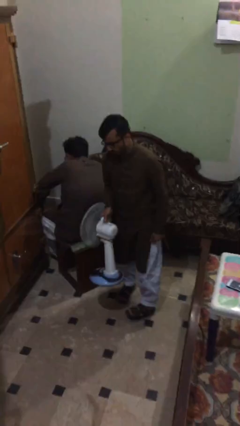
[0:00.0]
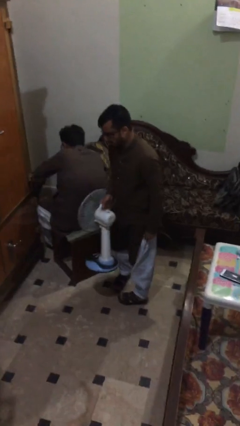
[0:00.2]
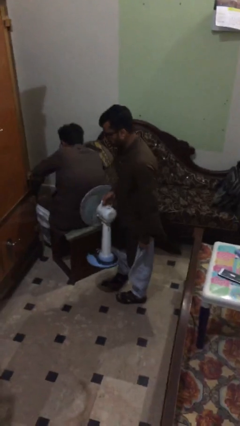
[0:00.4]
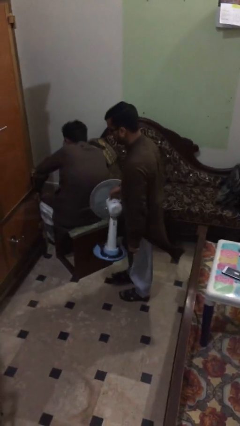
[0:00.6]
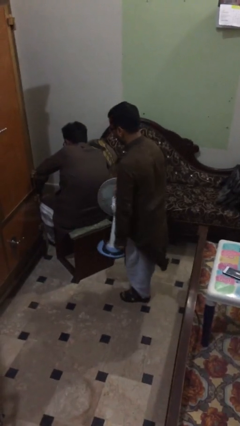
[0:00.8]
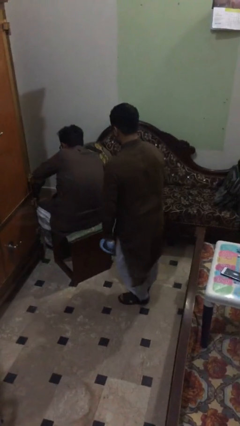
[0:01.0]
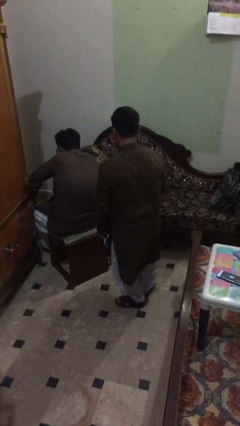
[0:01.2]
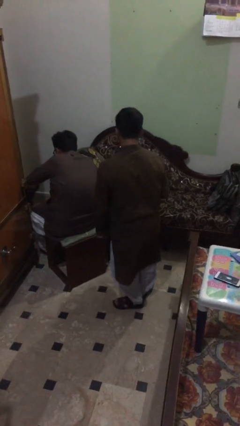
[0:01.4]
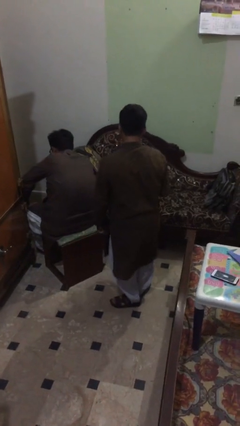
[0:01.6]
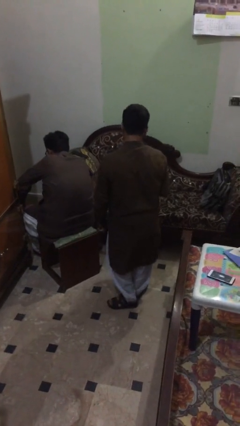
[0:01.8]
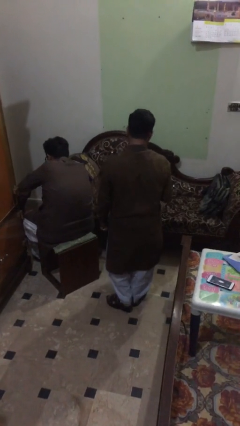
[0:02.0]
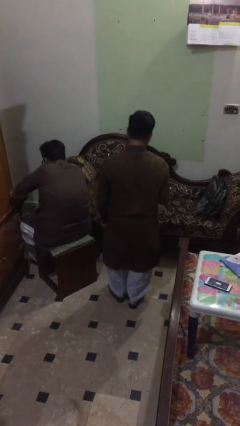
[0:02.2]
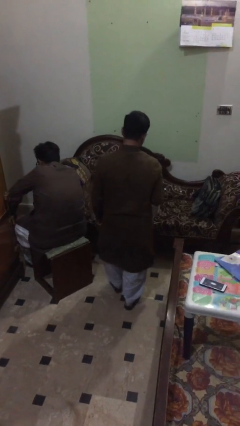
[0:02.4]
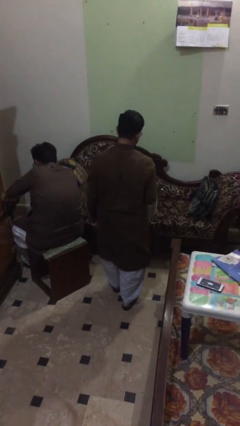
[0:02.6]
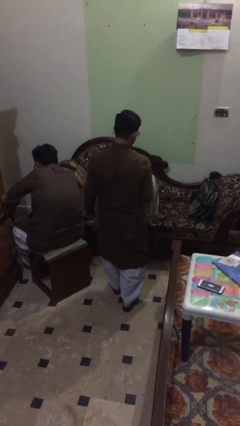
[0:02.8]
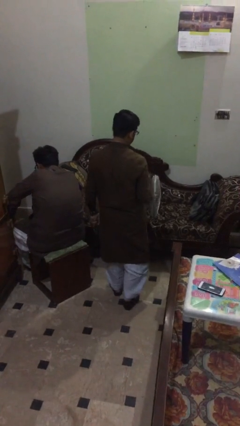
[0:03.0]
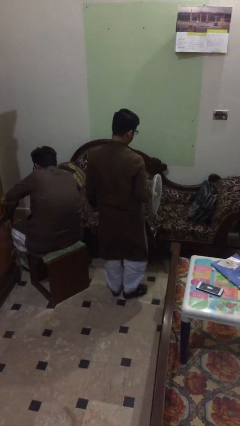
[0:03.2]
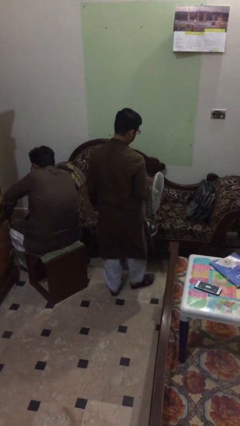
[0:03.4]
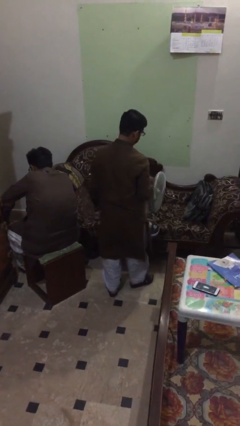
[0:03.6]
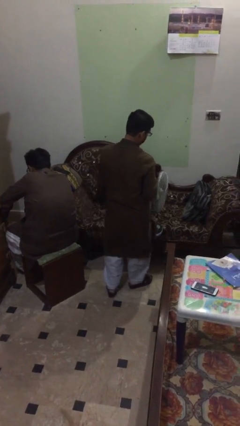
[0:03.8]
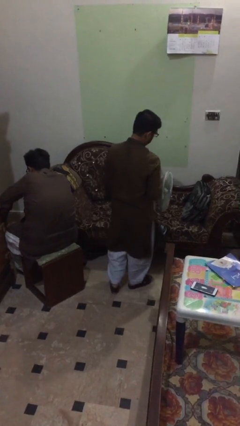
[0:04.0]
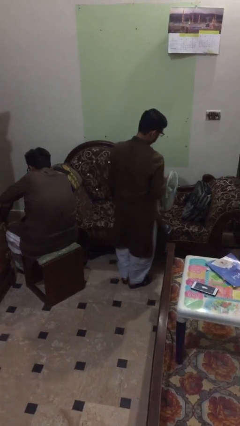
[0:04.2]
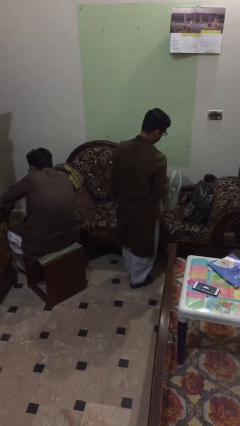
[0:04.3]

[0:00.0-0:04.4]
person steals object from person

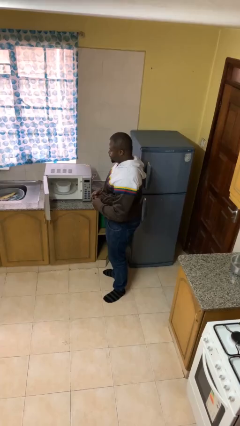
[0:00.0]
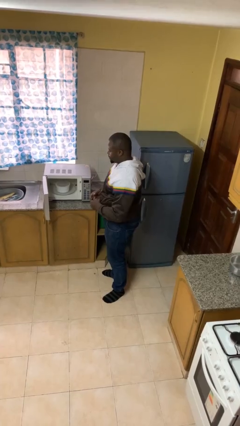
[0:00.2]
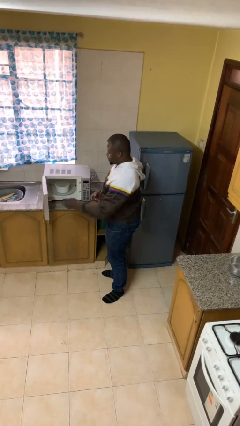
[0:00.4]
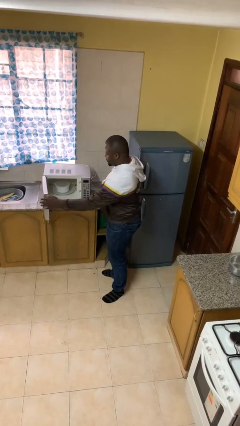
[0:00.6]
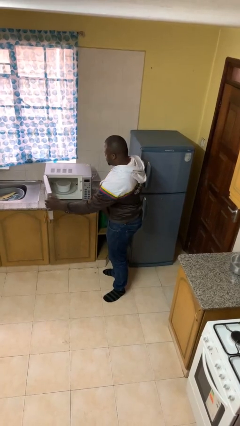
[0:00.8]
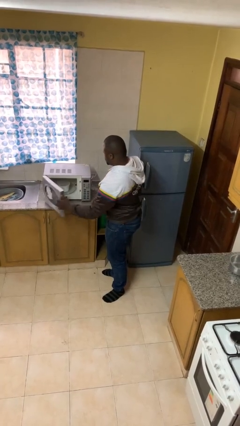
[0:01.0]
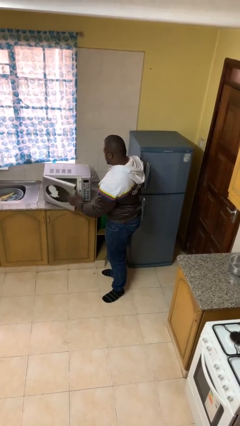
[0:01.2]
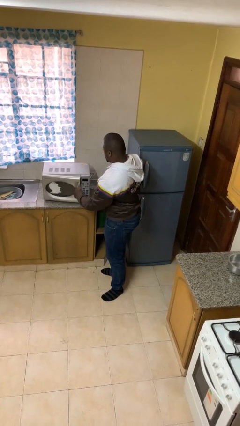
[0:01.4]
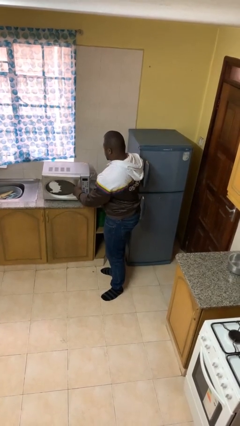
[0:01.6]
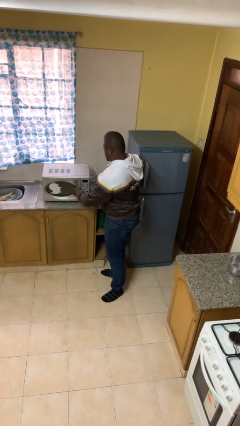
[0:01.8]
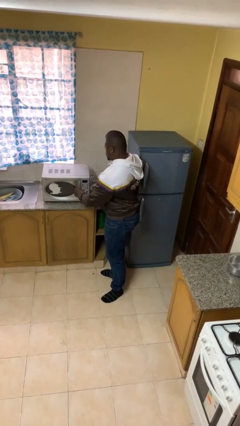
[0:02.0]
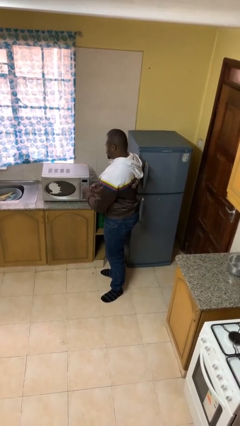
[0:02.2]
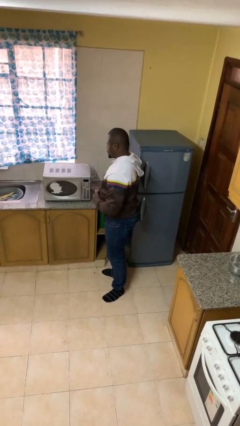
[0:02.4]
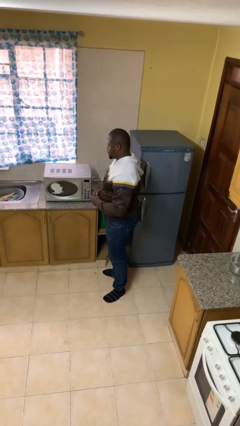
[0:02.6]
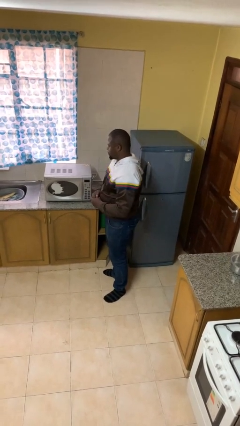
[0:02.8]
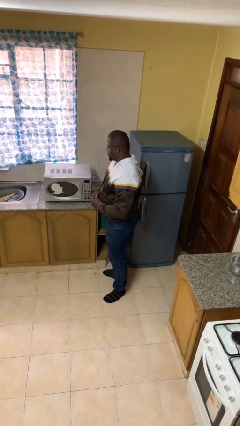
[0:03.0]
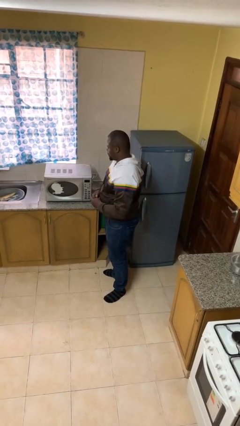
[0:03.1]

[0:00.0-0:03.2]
person closes microwave

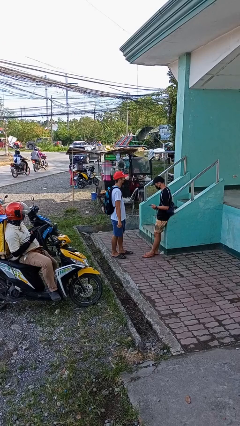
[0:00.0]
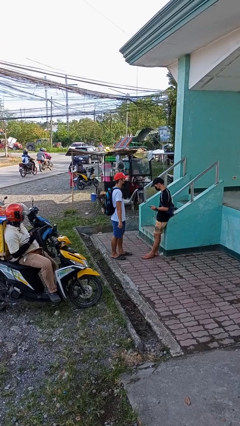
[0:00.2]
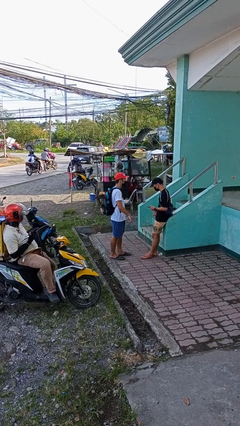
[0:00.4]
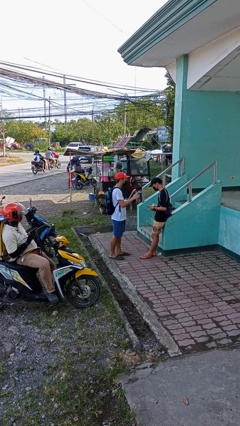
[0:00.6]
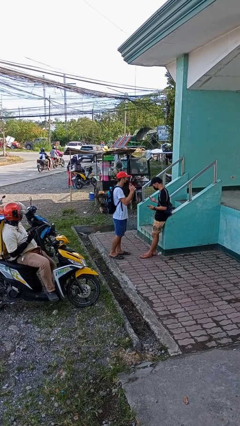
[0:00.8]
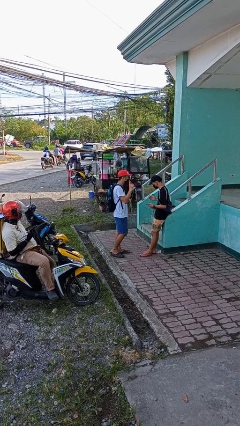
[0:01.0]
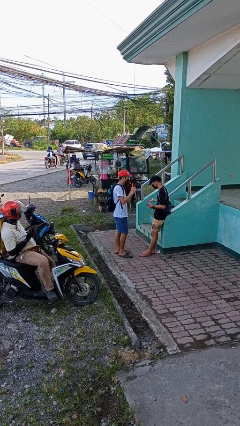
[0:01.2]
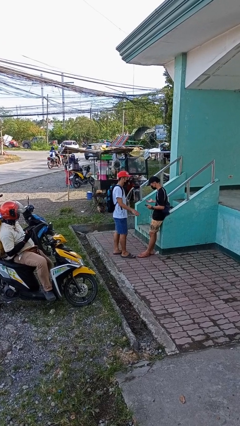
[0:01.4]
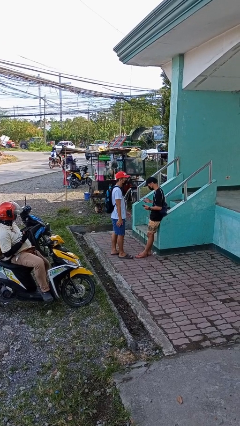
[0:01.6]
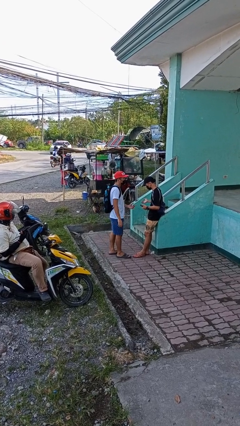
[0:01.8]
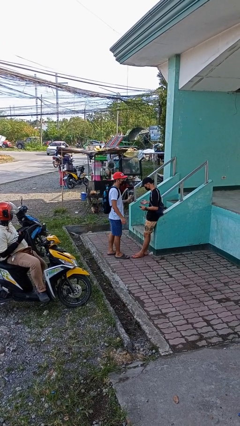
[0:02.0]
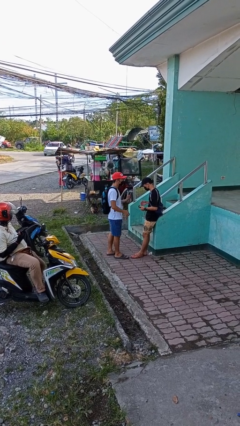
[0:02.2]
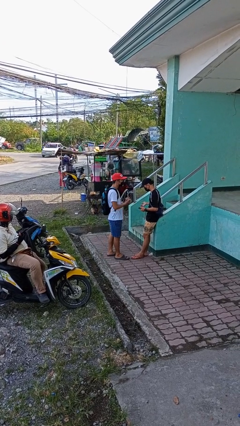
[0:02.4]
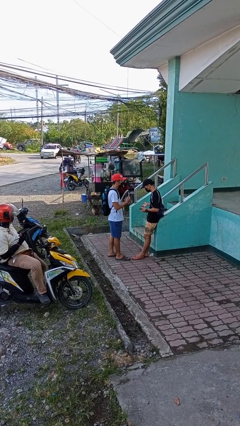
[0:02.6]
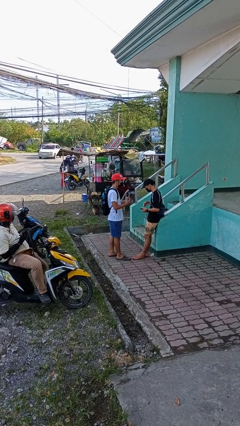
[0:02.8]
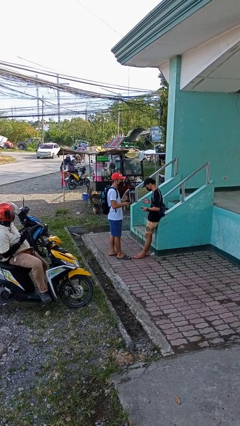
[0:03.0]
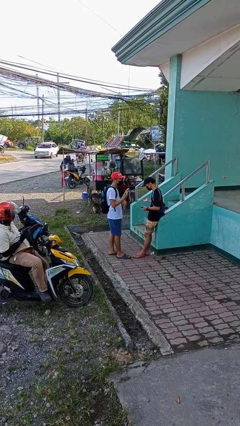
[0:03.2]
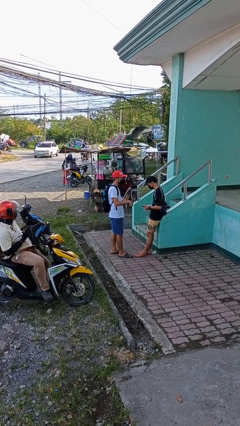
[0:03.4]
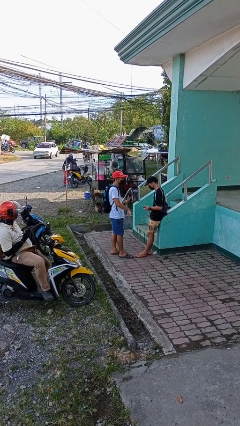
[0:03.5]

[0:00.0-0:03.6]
person talks to person

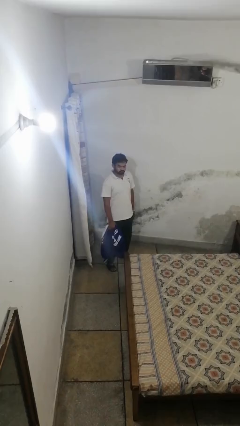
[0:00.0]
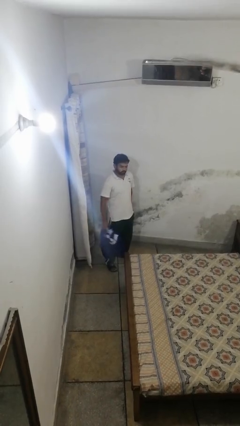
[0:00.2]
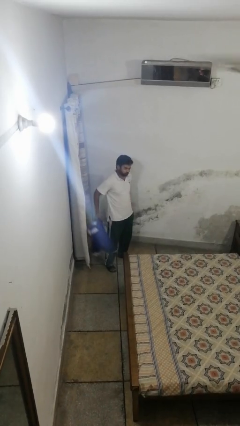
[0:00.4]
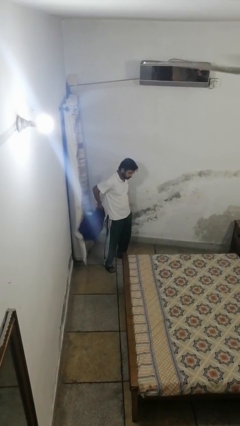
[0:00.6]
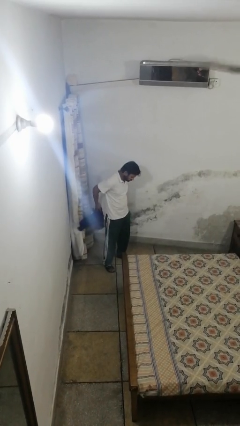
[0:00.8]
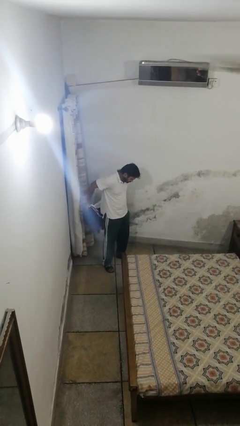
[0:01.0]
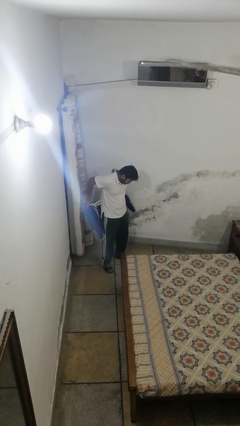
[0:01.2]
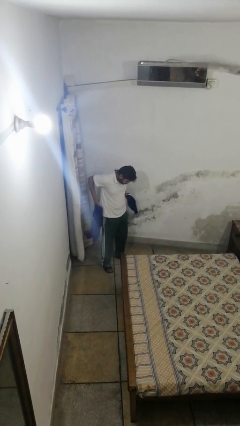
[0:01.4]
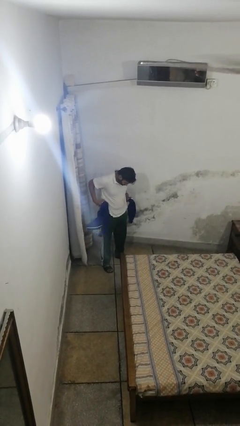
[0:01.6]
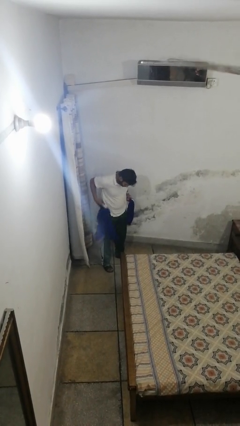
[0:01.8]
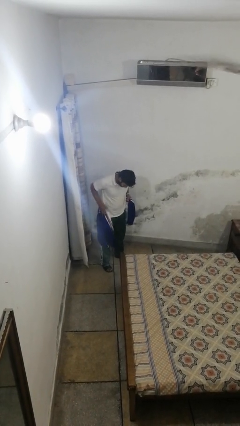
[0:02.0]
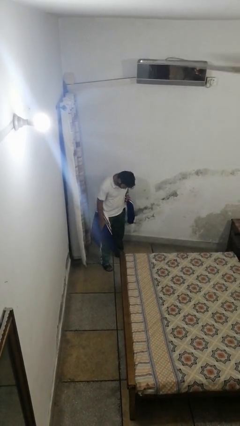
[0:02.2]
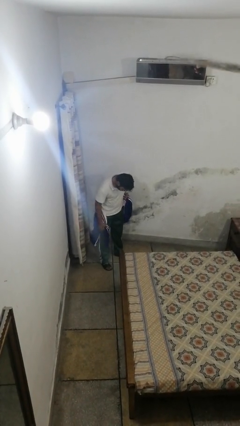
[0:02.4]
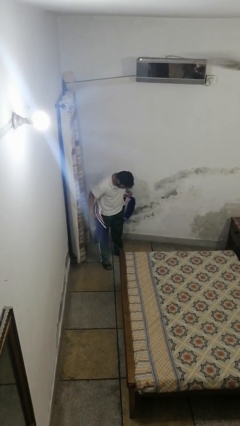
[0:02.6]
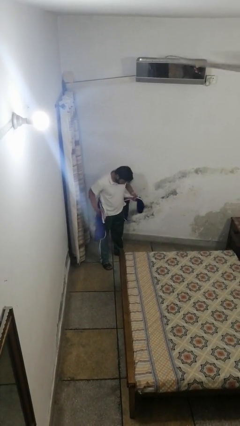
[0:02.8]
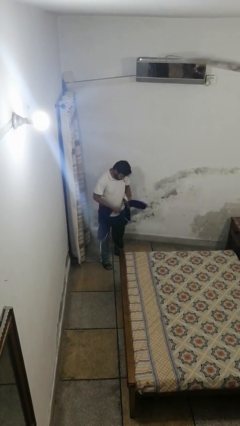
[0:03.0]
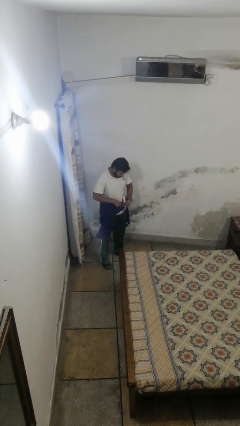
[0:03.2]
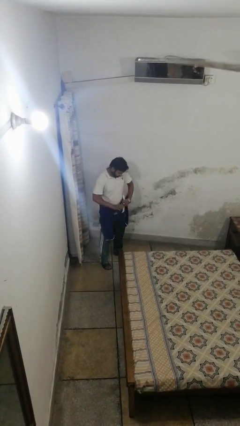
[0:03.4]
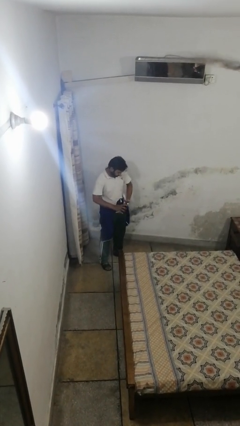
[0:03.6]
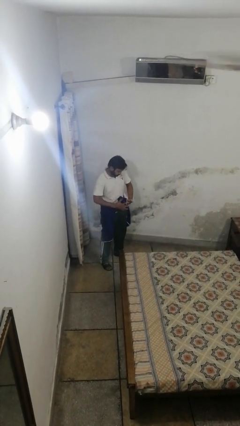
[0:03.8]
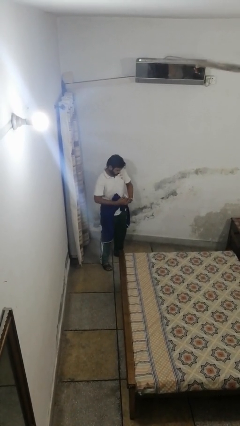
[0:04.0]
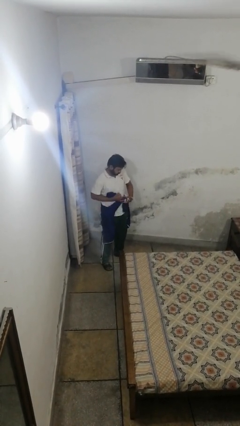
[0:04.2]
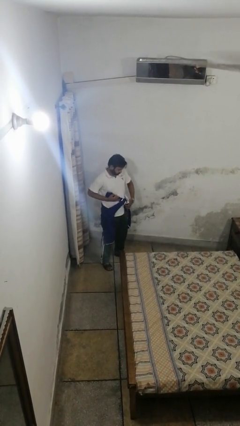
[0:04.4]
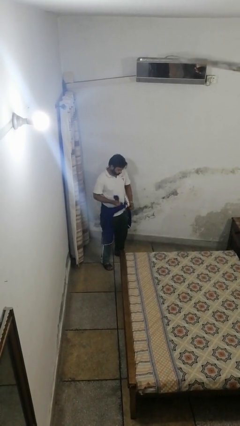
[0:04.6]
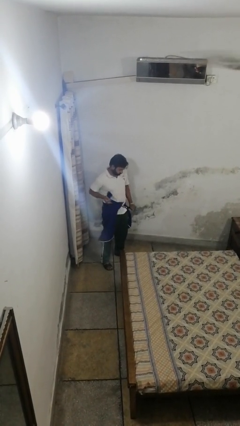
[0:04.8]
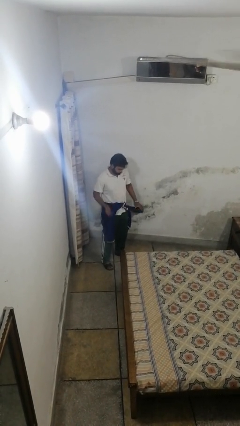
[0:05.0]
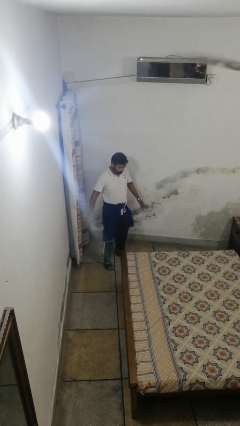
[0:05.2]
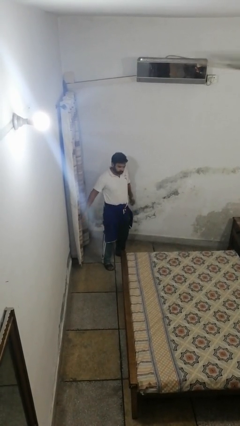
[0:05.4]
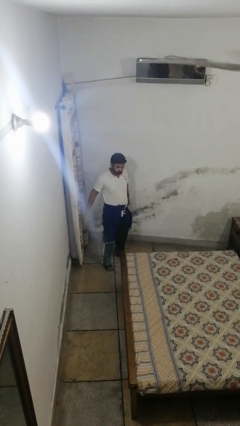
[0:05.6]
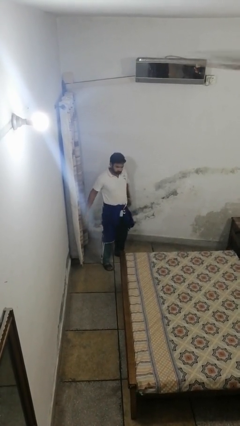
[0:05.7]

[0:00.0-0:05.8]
person ties jacket around waist

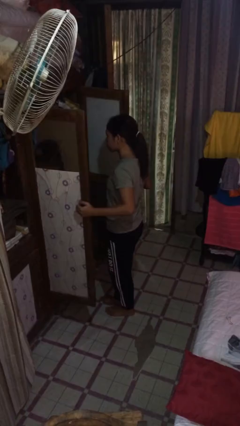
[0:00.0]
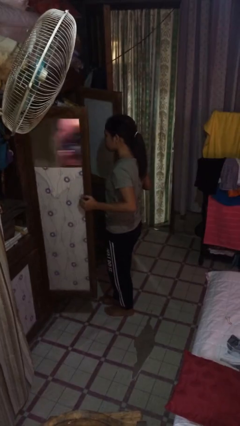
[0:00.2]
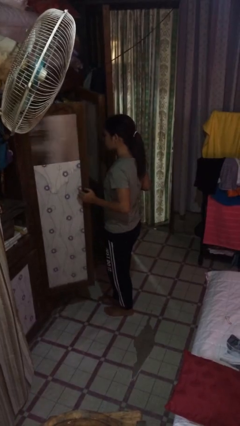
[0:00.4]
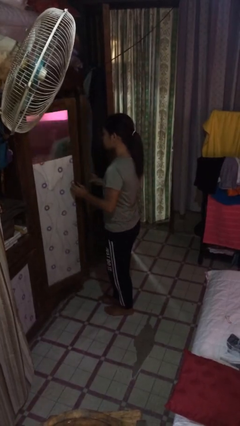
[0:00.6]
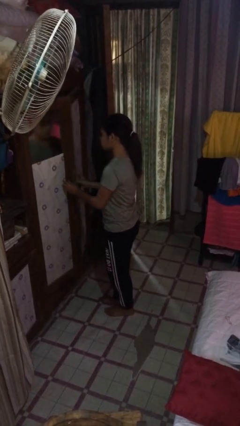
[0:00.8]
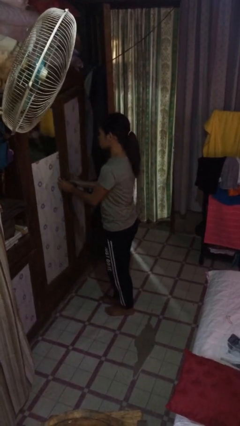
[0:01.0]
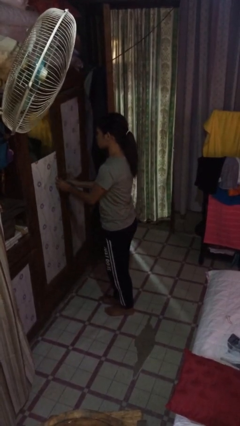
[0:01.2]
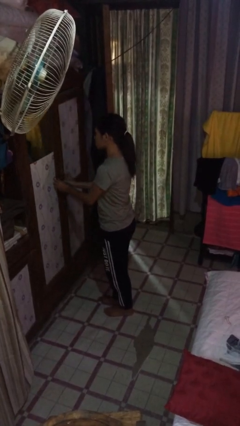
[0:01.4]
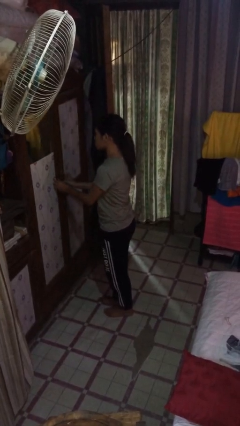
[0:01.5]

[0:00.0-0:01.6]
person closes closet door
